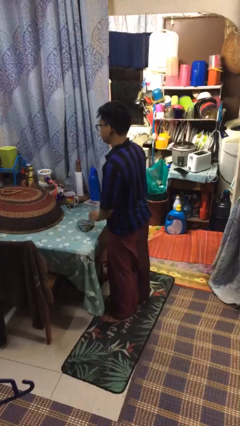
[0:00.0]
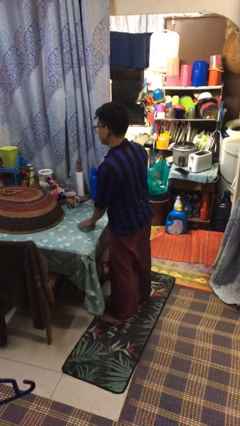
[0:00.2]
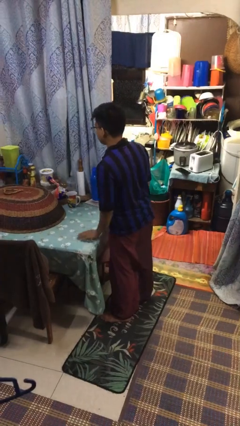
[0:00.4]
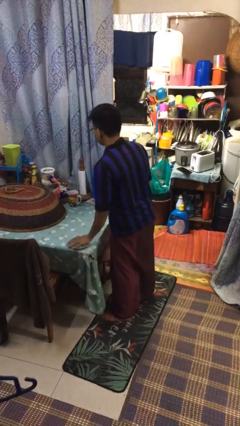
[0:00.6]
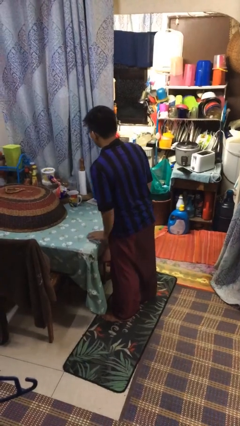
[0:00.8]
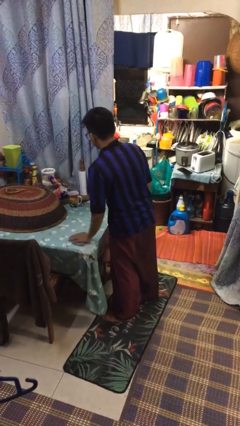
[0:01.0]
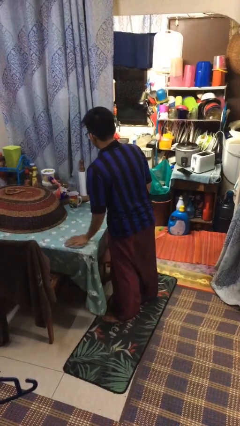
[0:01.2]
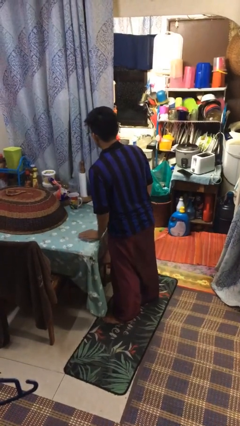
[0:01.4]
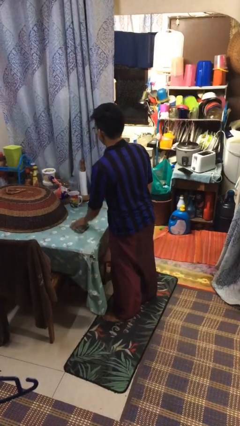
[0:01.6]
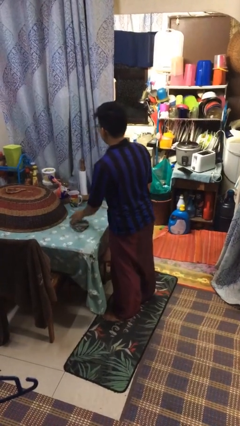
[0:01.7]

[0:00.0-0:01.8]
person cleans table with rag

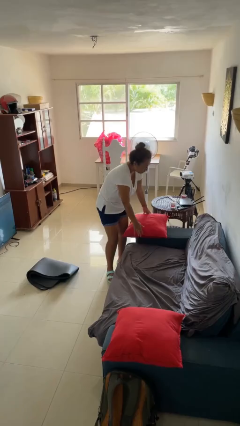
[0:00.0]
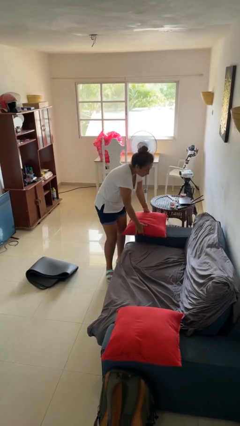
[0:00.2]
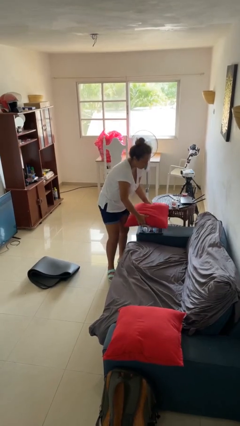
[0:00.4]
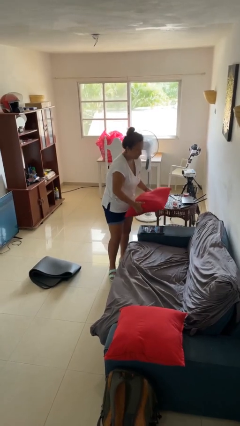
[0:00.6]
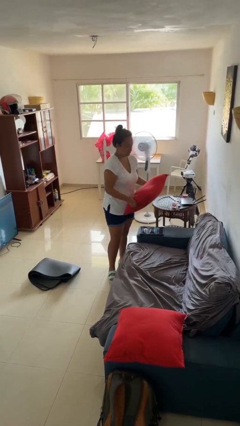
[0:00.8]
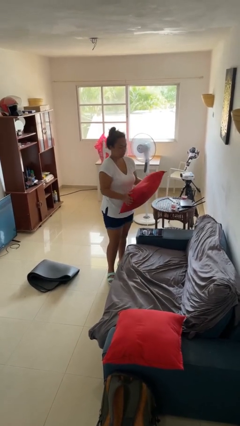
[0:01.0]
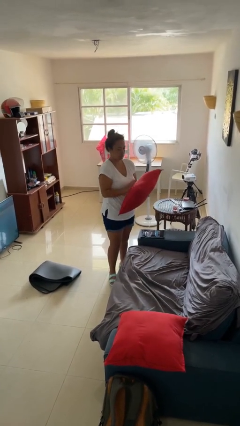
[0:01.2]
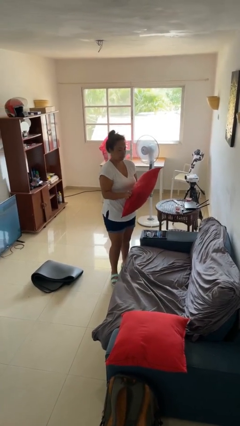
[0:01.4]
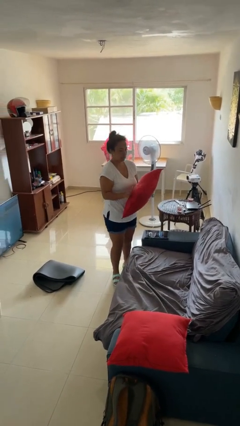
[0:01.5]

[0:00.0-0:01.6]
person picks up object from couch

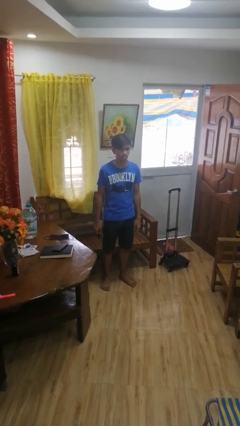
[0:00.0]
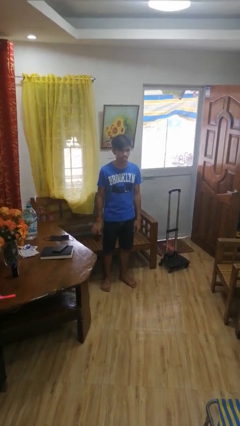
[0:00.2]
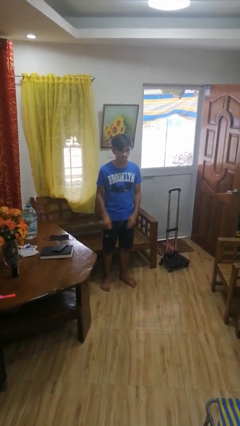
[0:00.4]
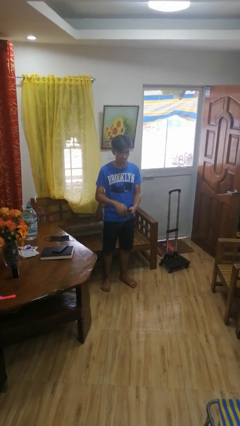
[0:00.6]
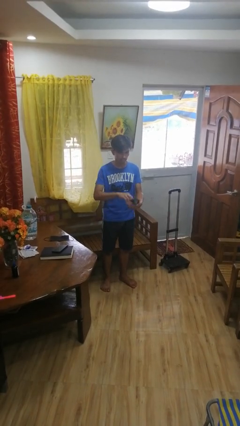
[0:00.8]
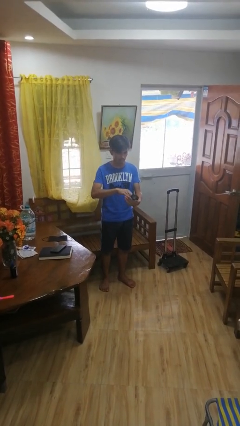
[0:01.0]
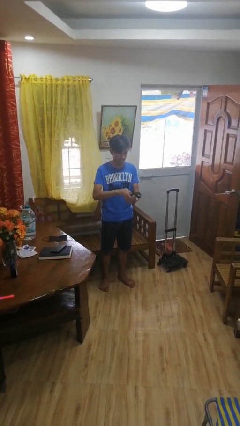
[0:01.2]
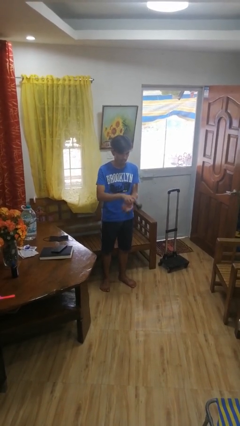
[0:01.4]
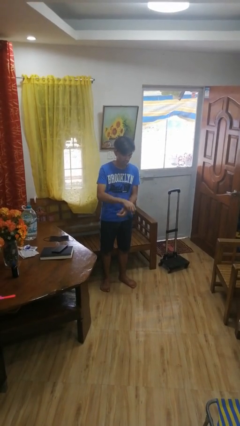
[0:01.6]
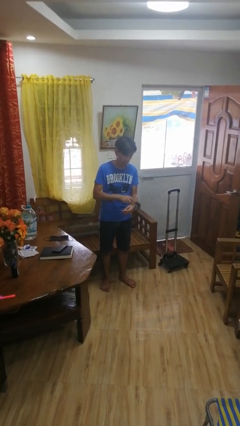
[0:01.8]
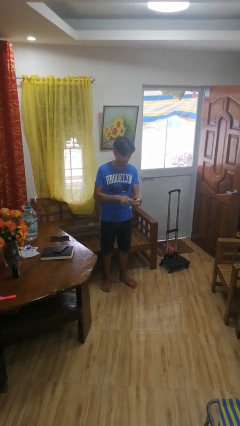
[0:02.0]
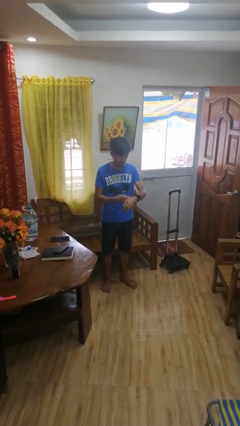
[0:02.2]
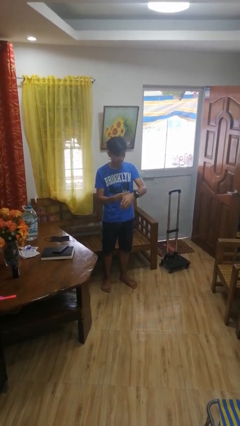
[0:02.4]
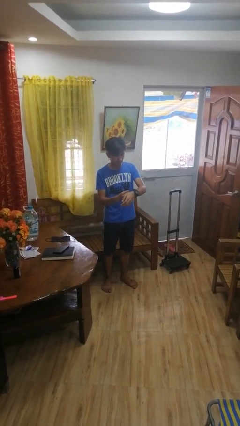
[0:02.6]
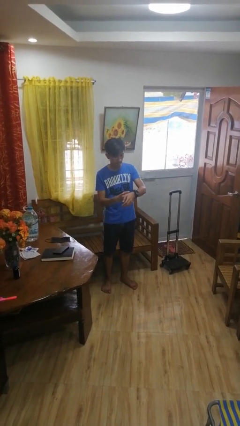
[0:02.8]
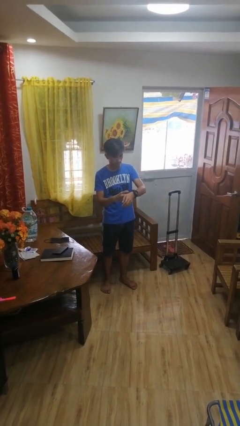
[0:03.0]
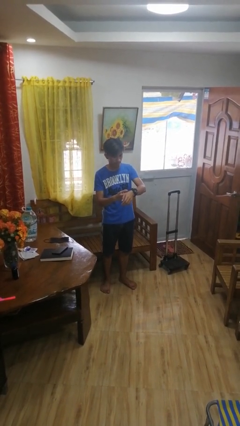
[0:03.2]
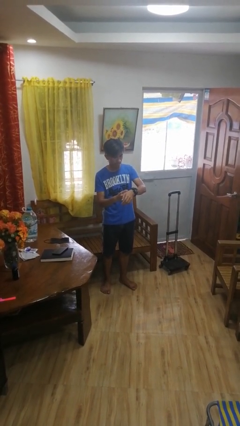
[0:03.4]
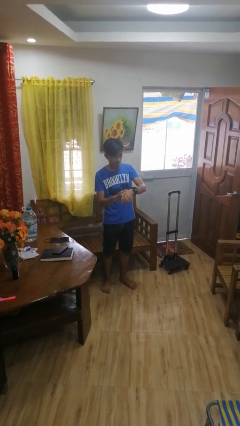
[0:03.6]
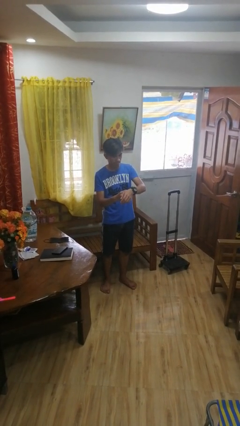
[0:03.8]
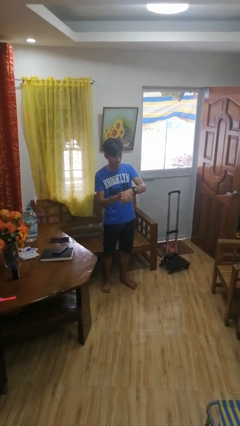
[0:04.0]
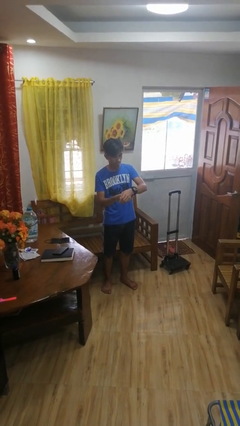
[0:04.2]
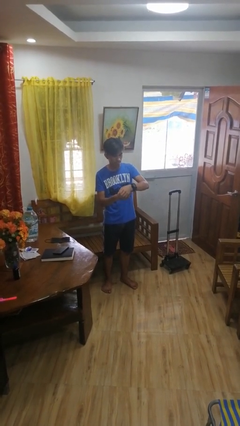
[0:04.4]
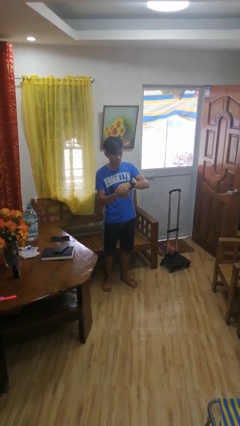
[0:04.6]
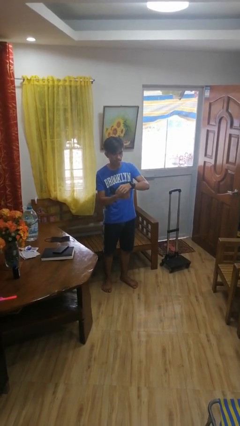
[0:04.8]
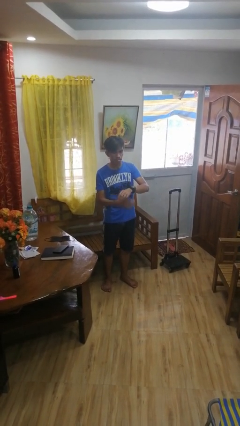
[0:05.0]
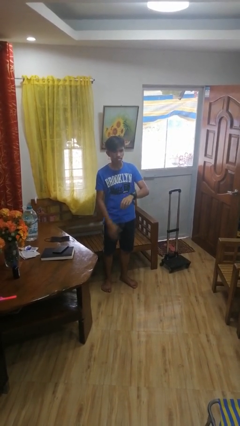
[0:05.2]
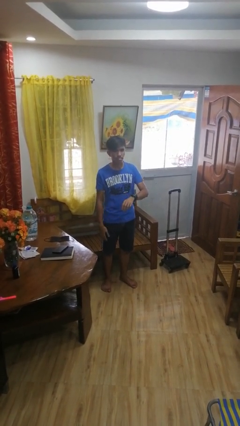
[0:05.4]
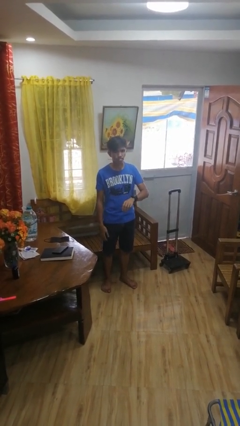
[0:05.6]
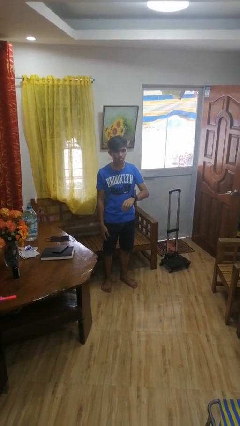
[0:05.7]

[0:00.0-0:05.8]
person puts on wristwatch

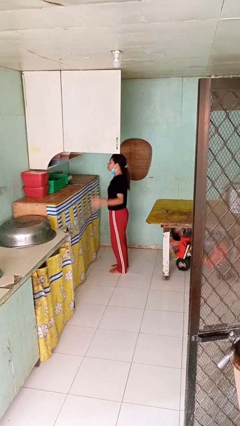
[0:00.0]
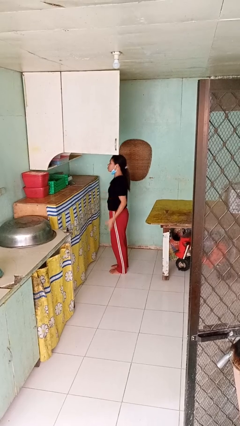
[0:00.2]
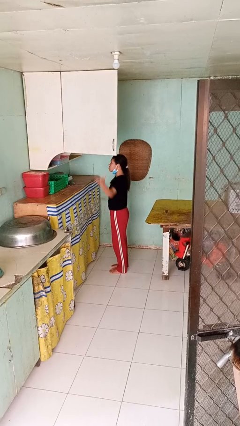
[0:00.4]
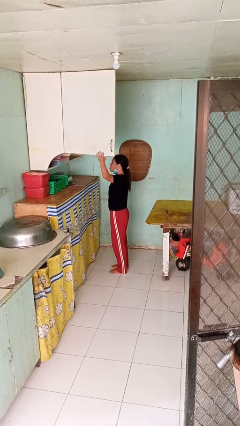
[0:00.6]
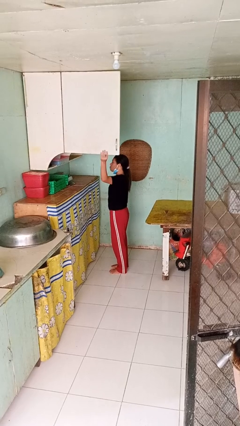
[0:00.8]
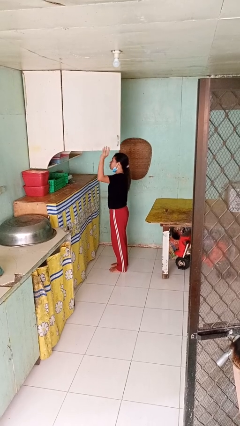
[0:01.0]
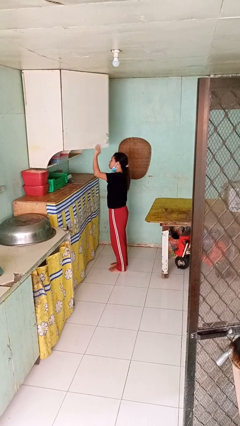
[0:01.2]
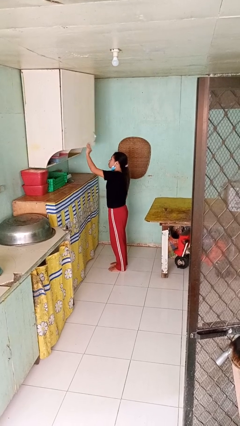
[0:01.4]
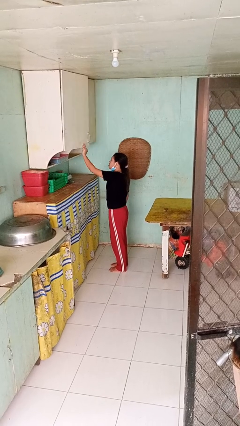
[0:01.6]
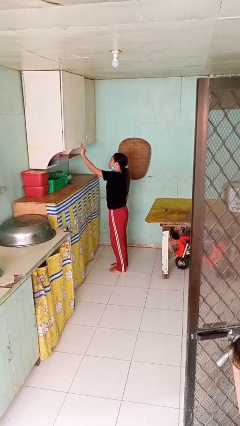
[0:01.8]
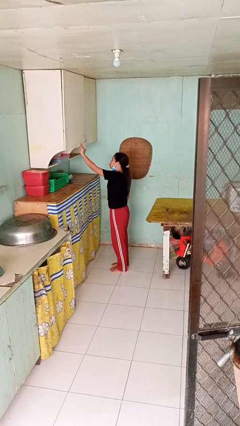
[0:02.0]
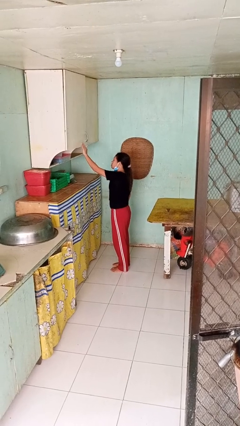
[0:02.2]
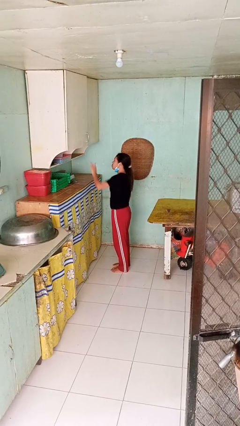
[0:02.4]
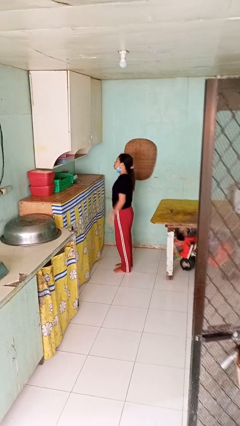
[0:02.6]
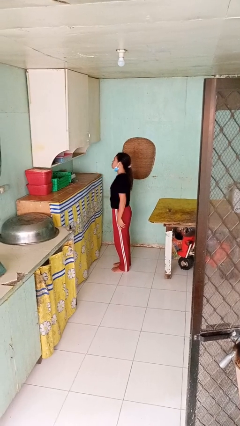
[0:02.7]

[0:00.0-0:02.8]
person closes cabinet

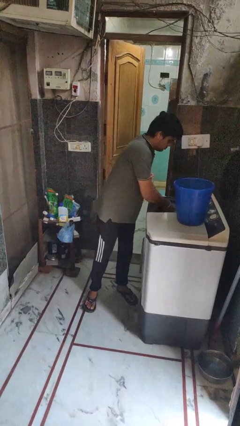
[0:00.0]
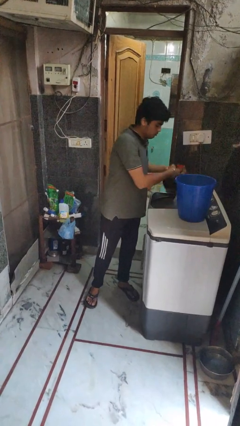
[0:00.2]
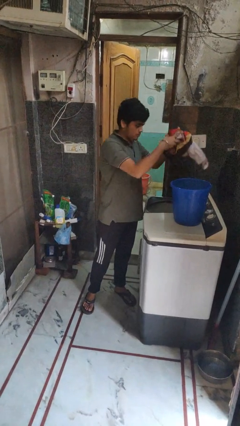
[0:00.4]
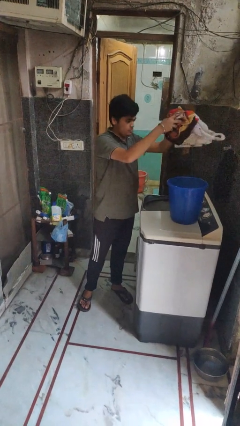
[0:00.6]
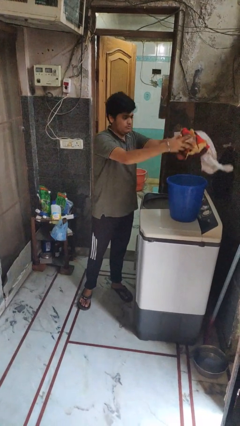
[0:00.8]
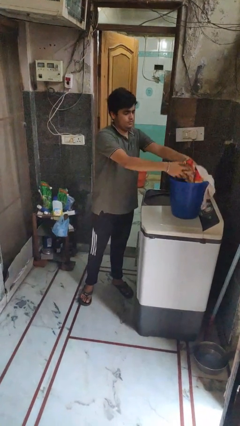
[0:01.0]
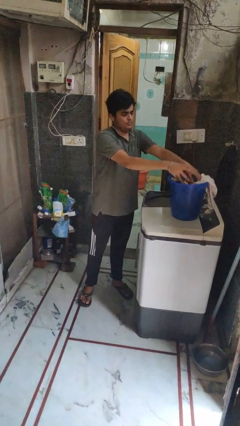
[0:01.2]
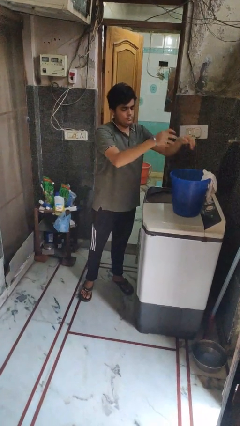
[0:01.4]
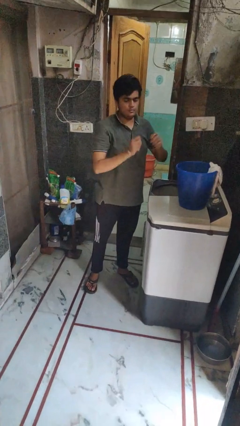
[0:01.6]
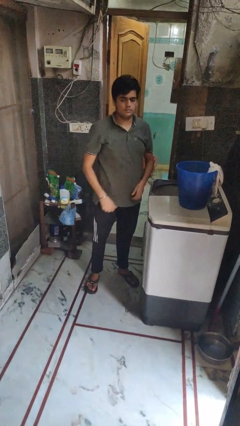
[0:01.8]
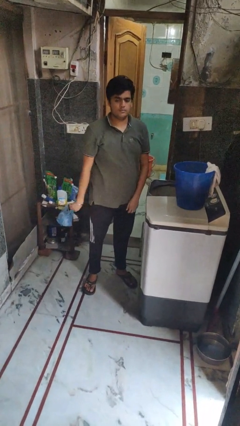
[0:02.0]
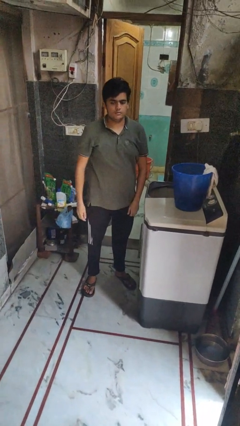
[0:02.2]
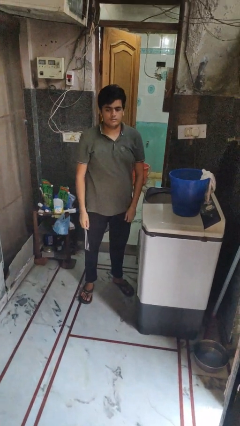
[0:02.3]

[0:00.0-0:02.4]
person unloads clotheswasher

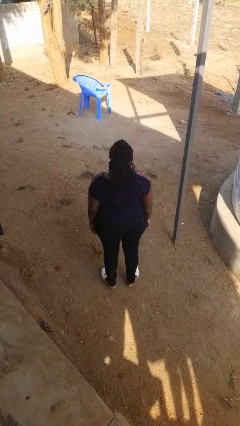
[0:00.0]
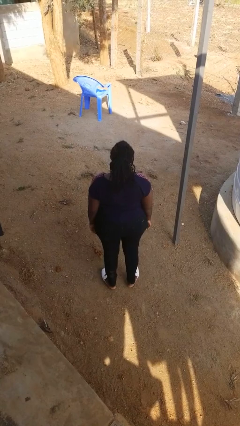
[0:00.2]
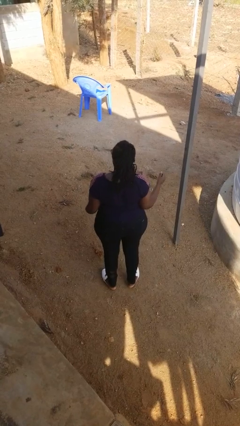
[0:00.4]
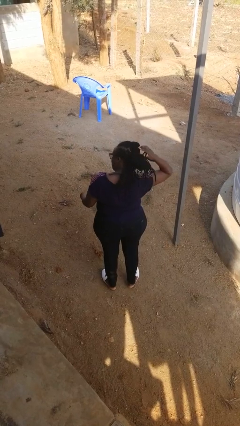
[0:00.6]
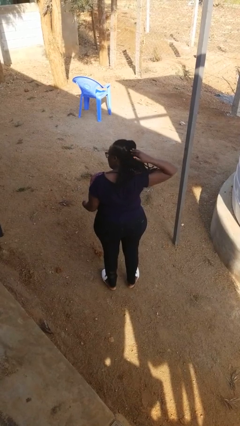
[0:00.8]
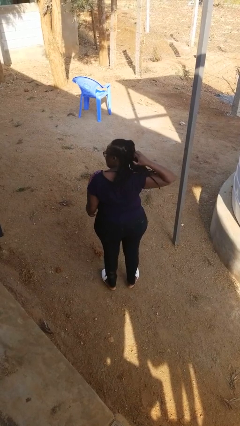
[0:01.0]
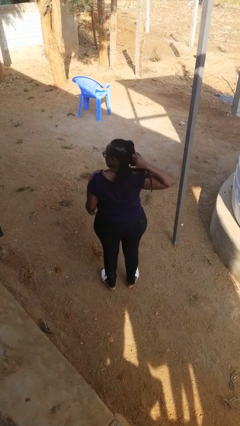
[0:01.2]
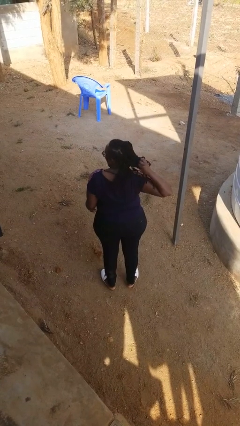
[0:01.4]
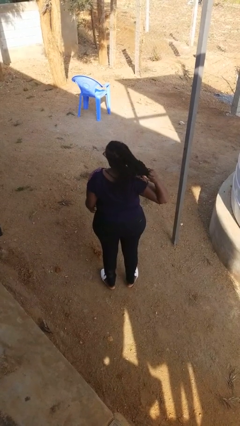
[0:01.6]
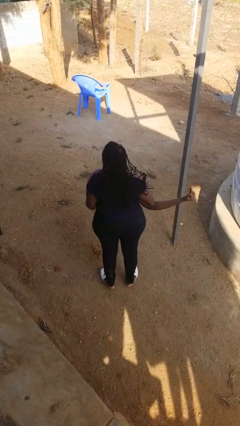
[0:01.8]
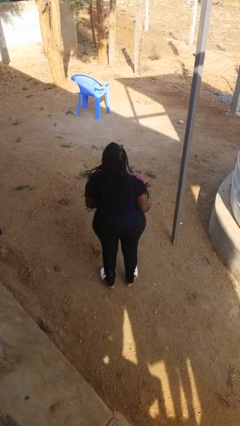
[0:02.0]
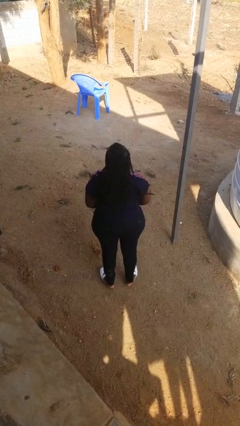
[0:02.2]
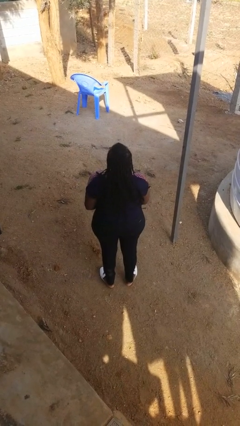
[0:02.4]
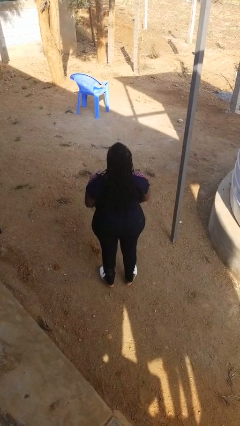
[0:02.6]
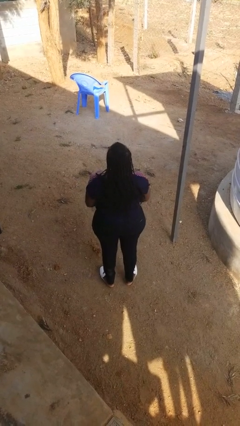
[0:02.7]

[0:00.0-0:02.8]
person takes off hairtie
